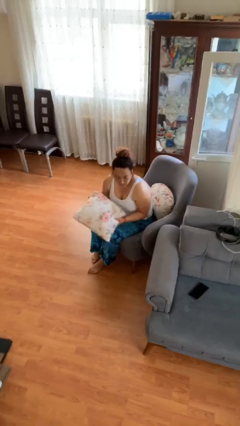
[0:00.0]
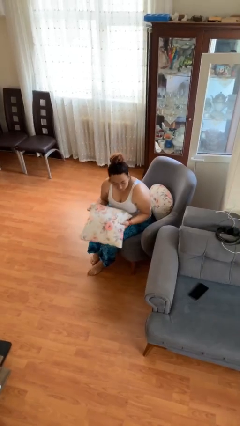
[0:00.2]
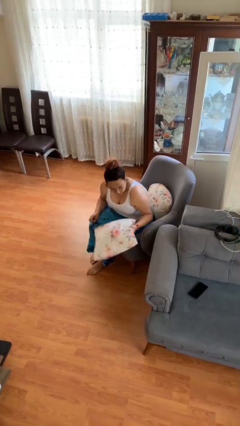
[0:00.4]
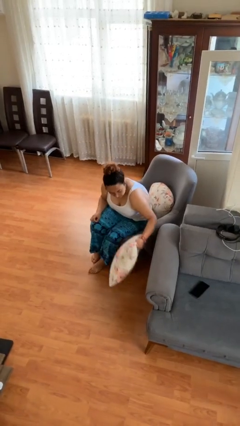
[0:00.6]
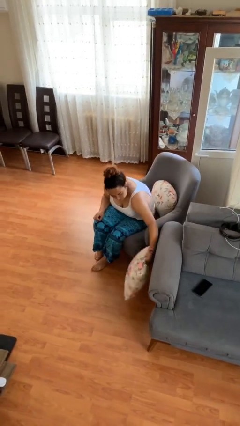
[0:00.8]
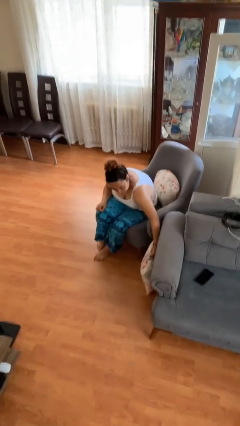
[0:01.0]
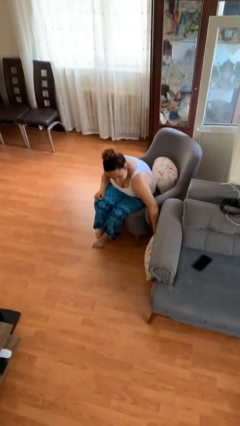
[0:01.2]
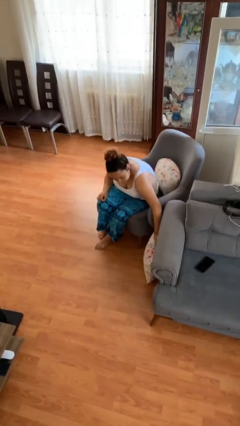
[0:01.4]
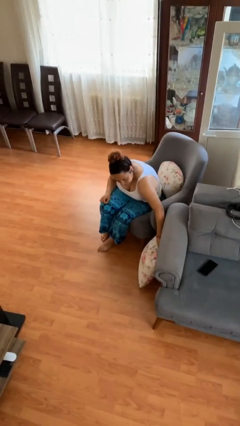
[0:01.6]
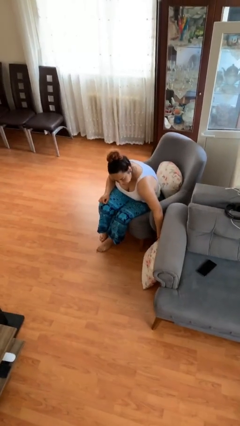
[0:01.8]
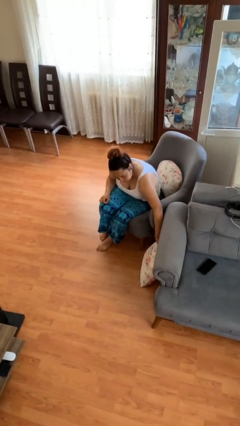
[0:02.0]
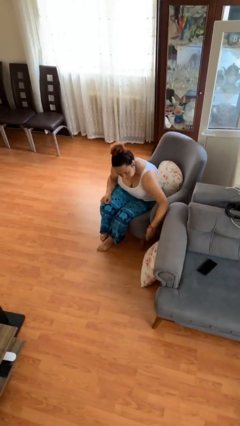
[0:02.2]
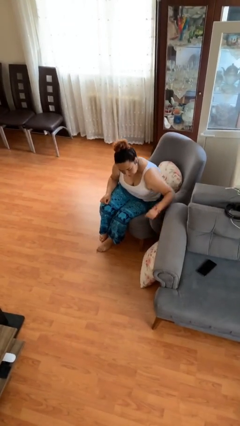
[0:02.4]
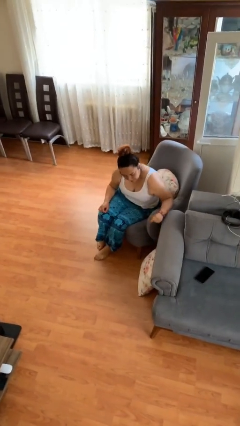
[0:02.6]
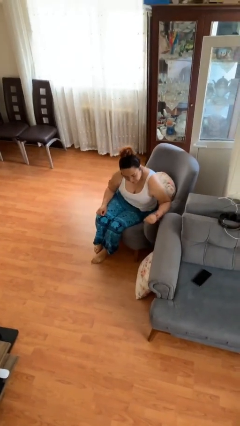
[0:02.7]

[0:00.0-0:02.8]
person puts down object on floor

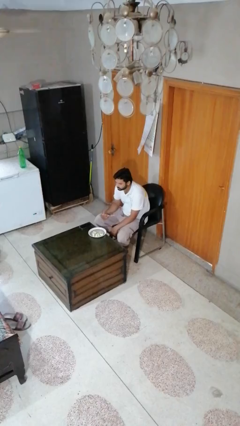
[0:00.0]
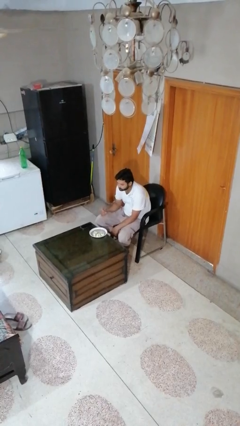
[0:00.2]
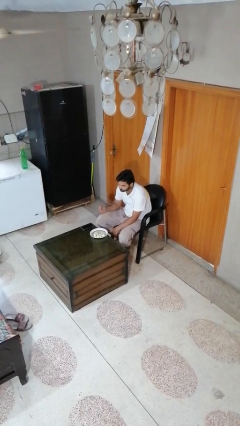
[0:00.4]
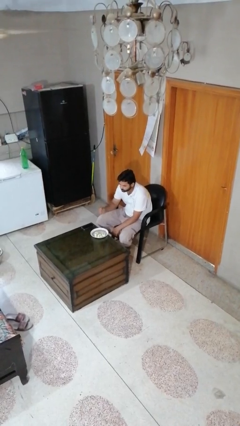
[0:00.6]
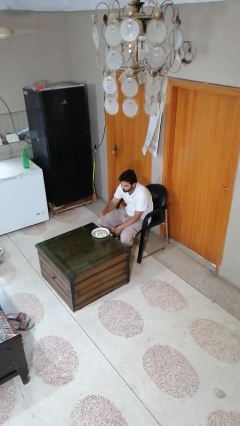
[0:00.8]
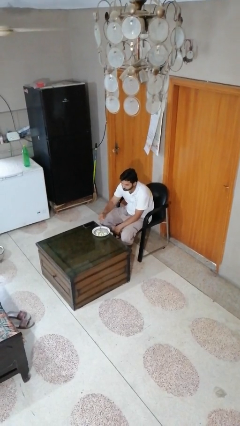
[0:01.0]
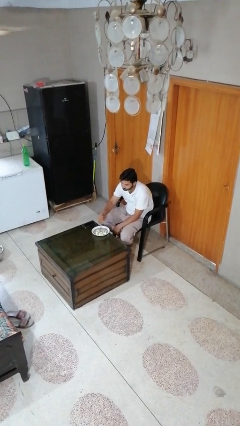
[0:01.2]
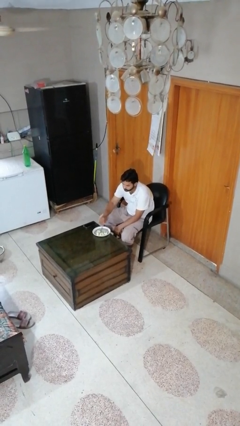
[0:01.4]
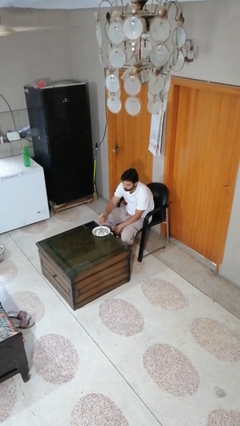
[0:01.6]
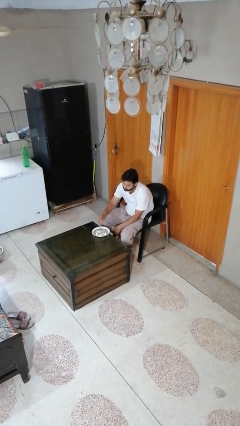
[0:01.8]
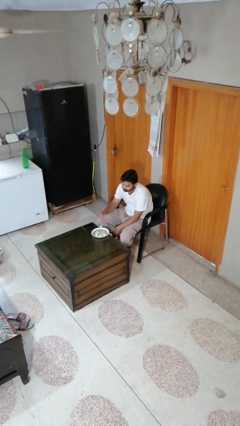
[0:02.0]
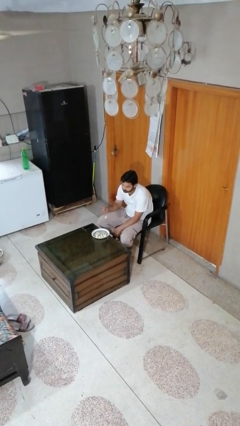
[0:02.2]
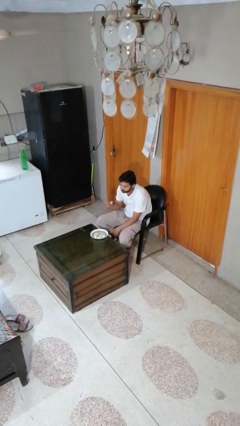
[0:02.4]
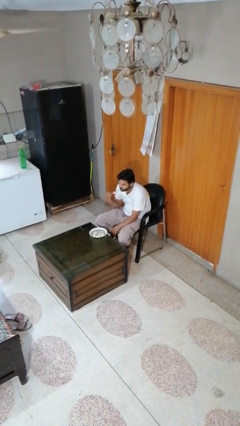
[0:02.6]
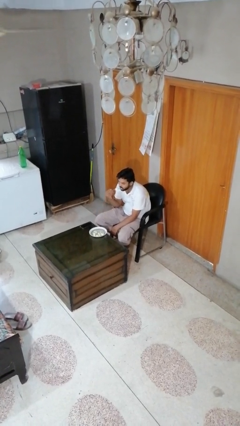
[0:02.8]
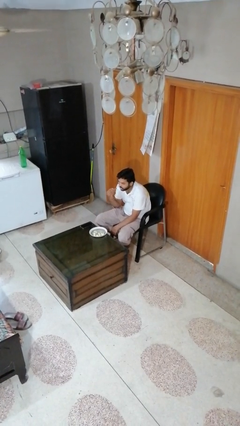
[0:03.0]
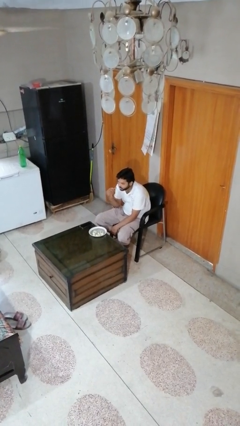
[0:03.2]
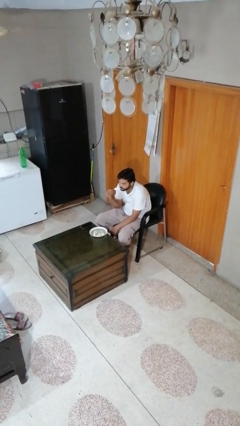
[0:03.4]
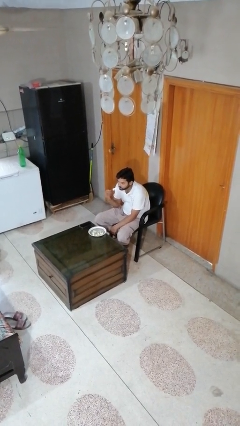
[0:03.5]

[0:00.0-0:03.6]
person eats with utensil

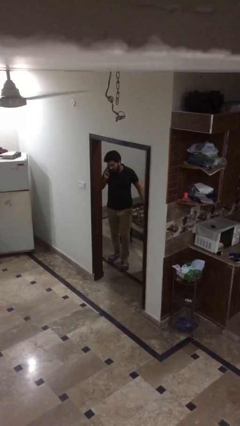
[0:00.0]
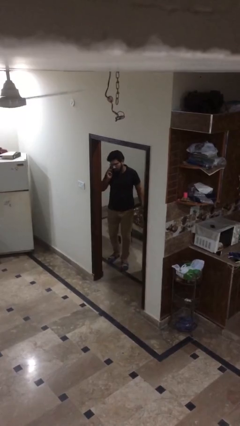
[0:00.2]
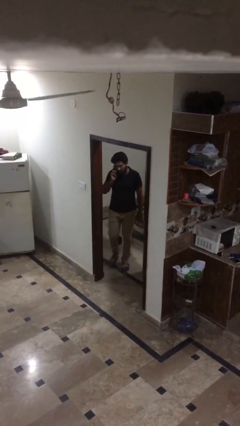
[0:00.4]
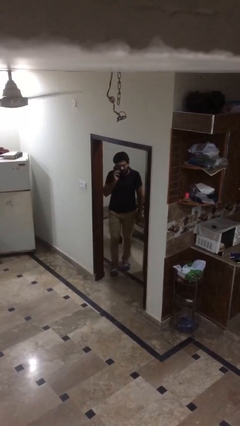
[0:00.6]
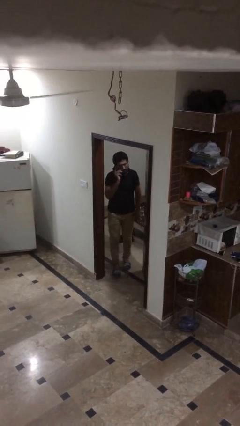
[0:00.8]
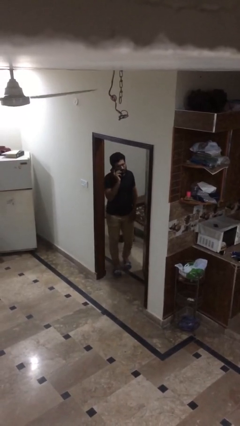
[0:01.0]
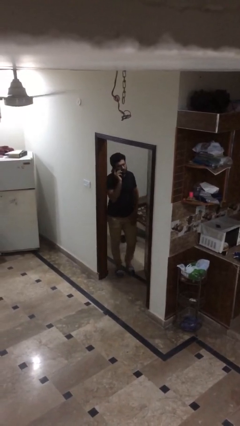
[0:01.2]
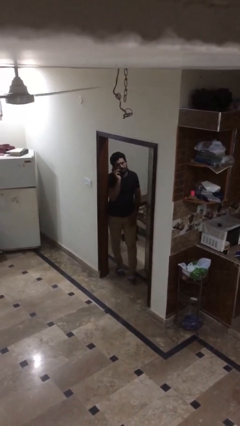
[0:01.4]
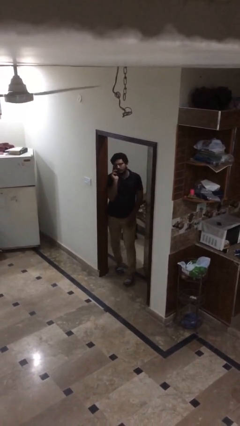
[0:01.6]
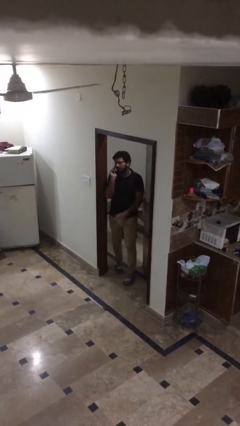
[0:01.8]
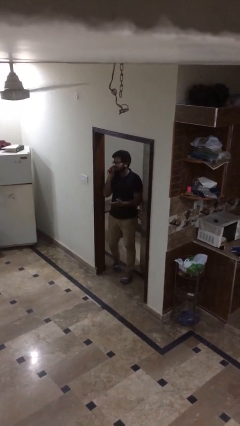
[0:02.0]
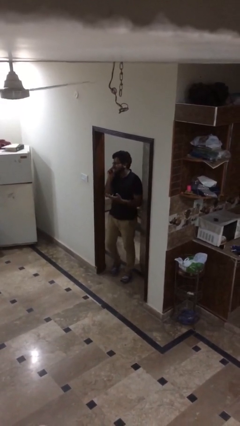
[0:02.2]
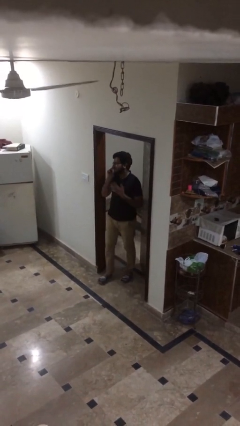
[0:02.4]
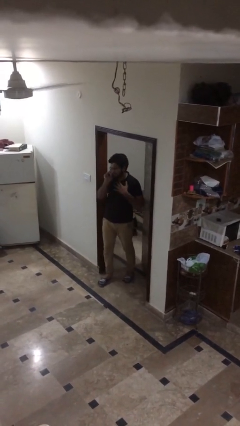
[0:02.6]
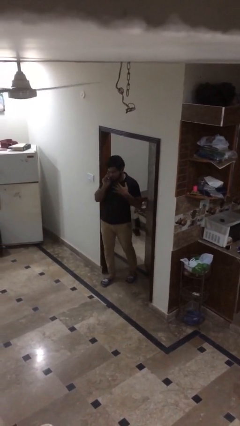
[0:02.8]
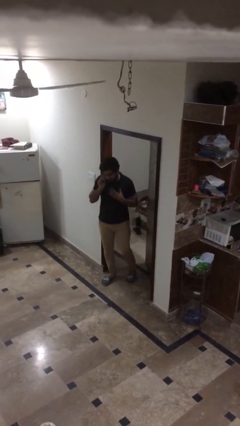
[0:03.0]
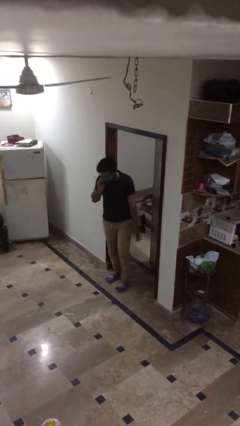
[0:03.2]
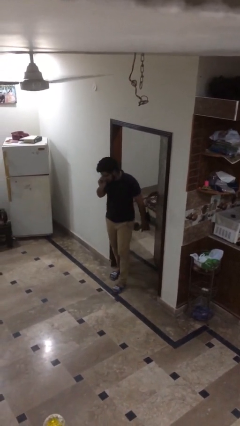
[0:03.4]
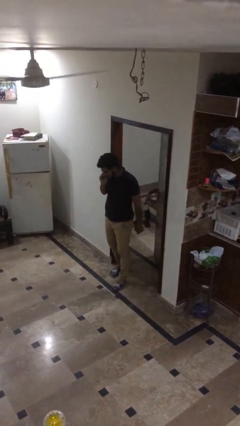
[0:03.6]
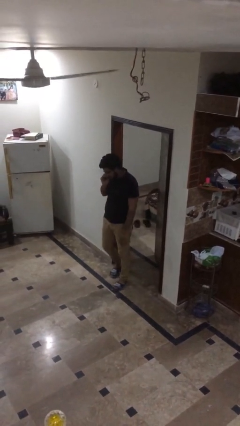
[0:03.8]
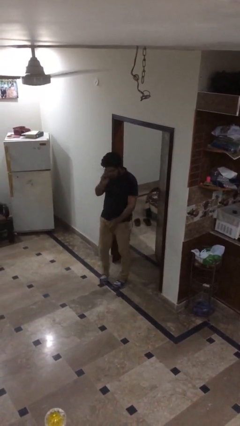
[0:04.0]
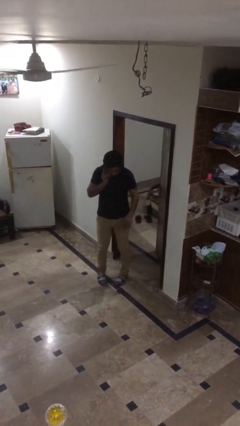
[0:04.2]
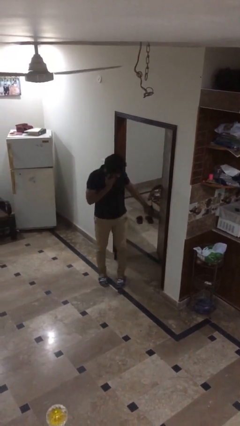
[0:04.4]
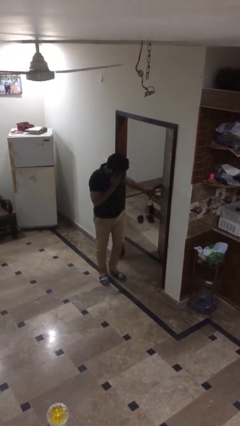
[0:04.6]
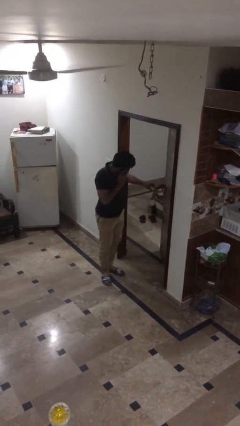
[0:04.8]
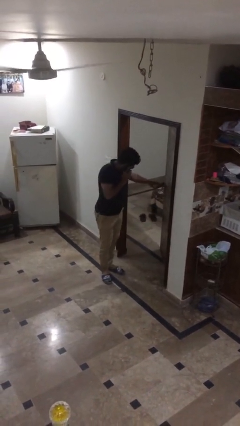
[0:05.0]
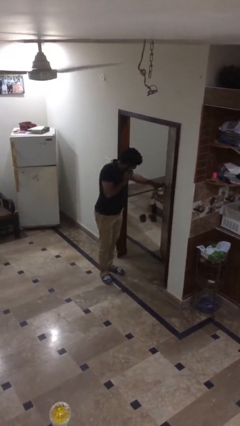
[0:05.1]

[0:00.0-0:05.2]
person enters scene through structure

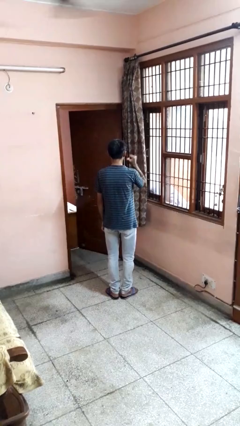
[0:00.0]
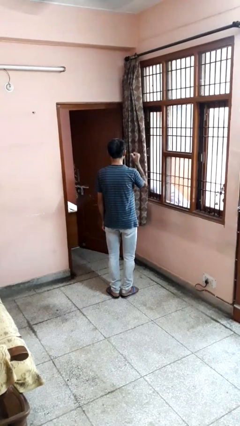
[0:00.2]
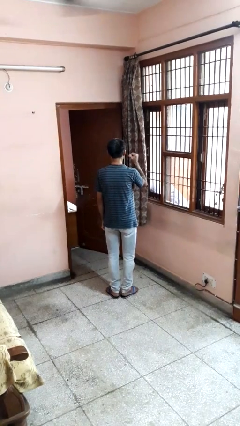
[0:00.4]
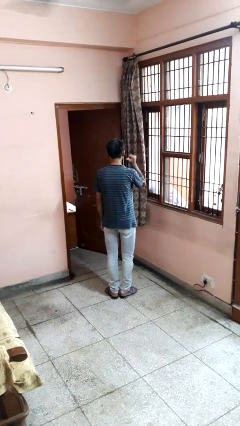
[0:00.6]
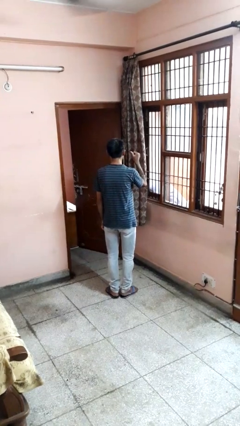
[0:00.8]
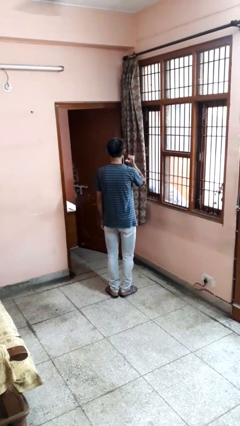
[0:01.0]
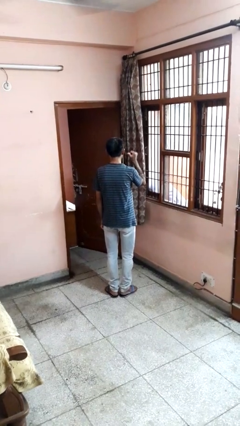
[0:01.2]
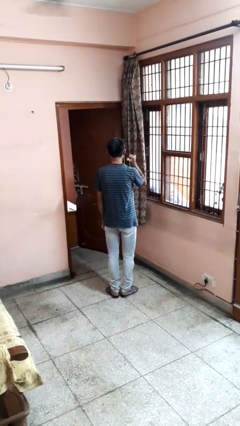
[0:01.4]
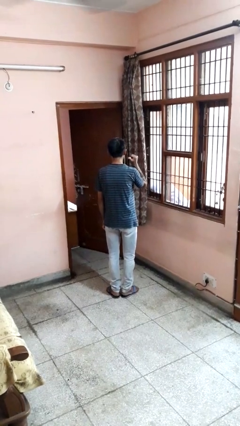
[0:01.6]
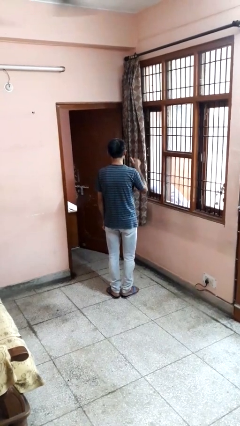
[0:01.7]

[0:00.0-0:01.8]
person gestures behind me

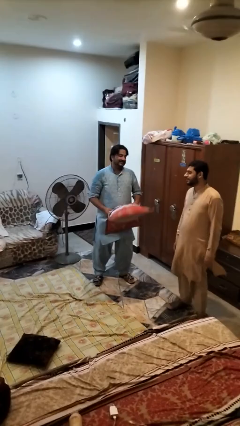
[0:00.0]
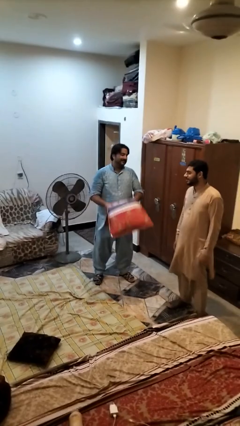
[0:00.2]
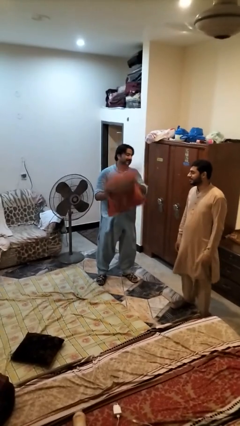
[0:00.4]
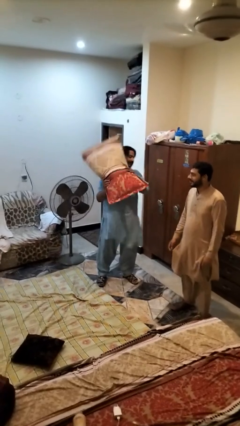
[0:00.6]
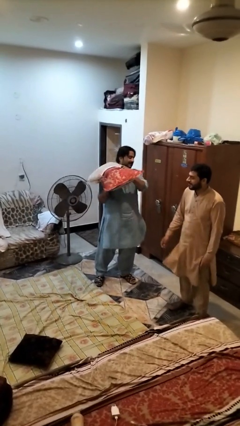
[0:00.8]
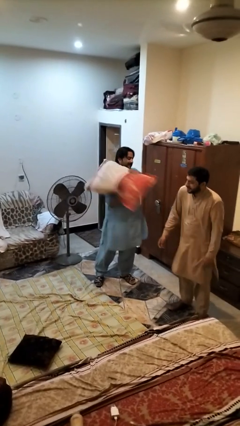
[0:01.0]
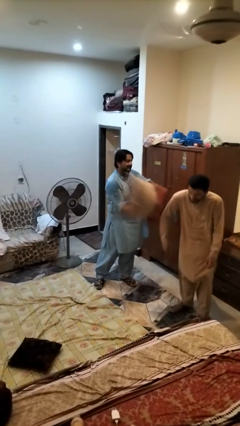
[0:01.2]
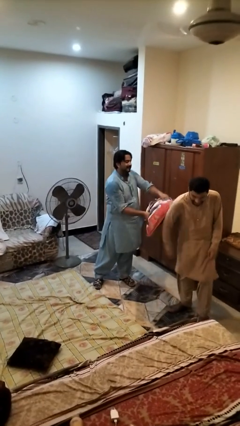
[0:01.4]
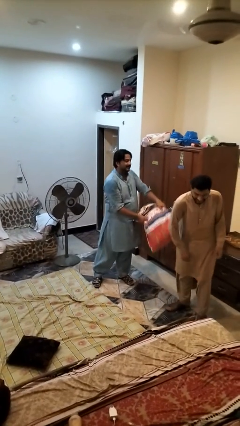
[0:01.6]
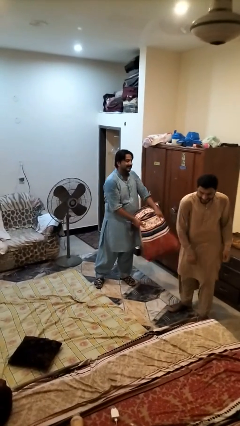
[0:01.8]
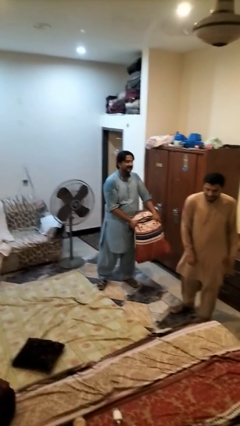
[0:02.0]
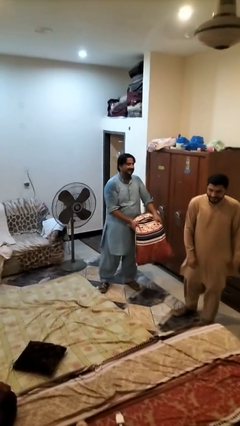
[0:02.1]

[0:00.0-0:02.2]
person hits person with pillow

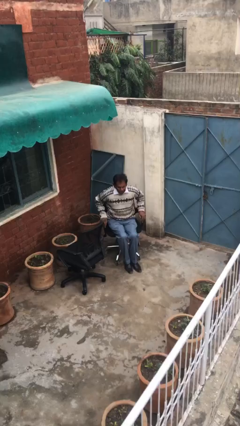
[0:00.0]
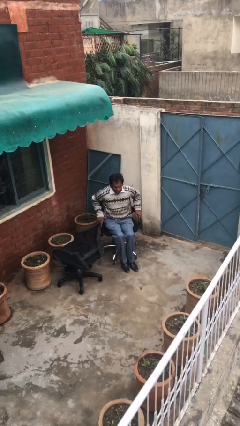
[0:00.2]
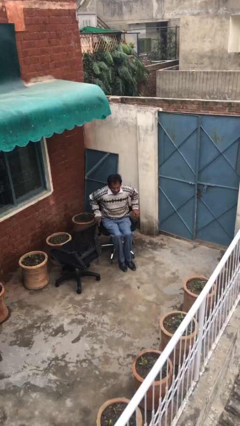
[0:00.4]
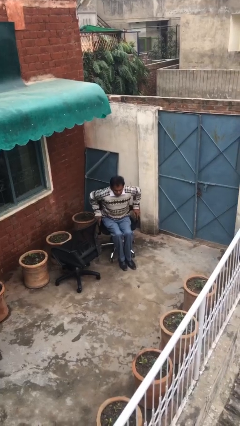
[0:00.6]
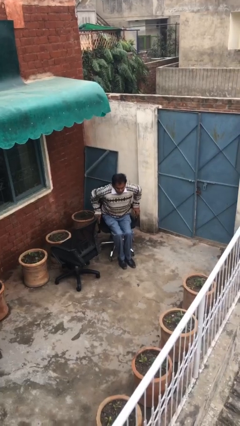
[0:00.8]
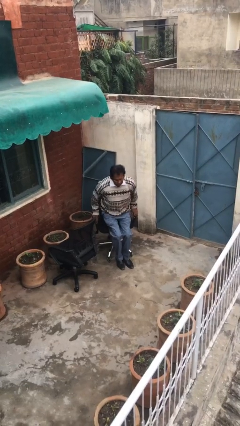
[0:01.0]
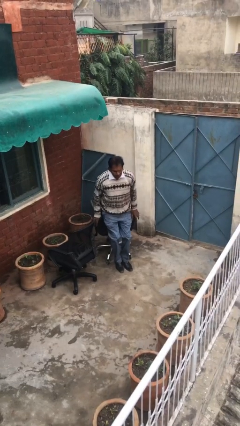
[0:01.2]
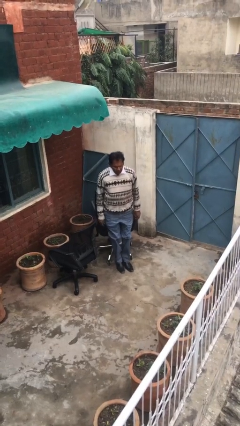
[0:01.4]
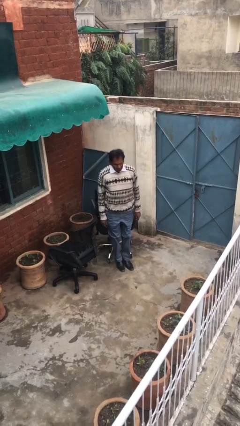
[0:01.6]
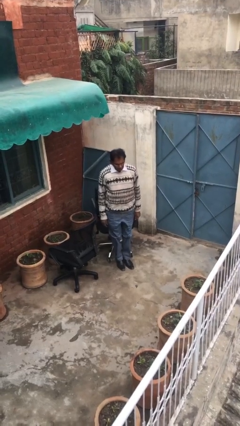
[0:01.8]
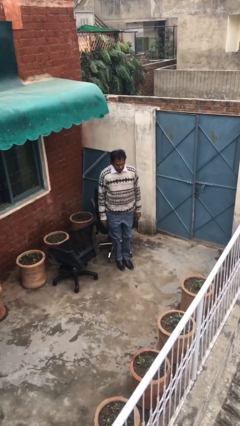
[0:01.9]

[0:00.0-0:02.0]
person stands up
